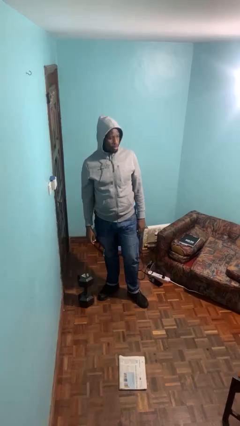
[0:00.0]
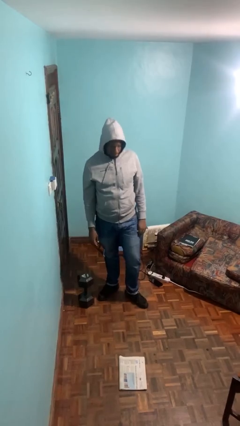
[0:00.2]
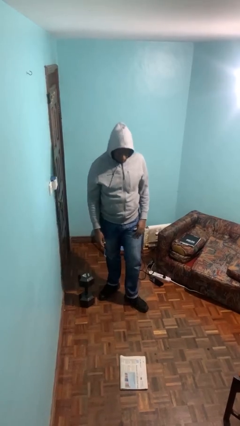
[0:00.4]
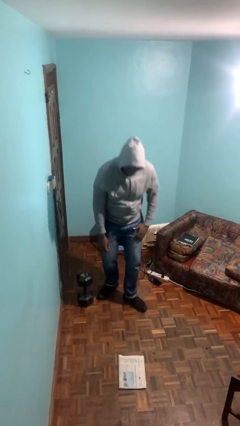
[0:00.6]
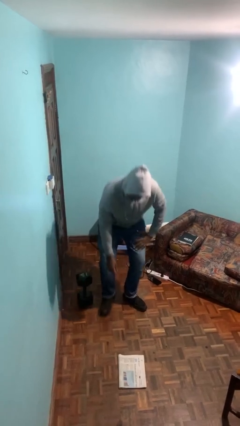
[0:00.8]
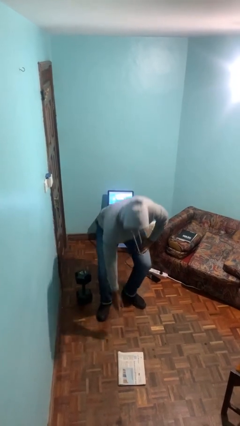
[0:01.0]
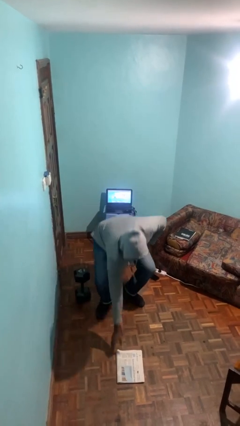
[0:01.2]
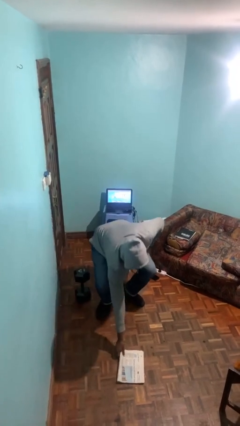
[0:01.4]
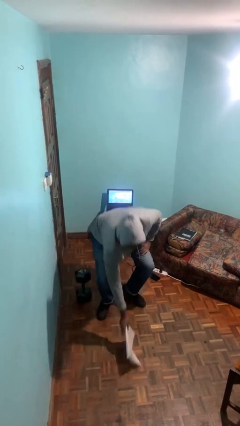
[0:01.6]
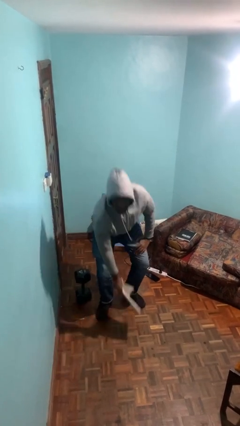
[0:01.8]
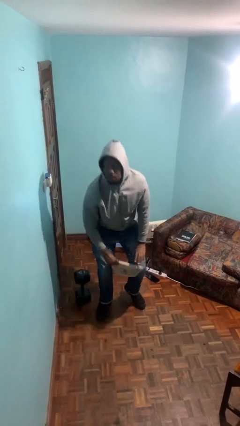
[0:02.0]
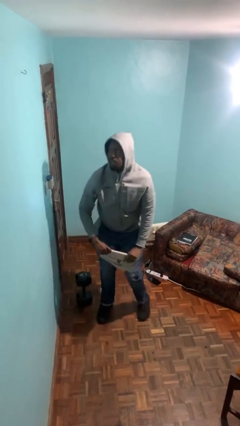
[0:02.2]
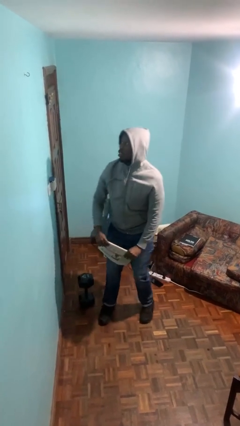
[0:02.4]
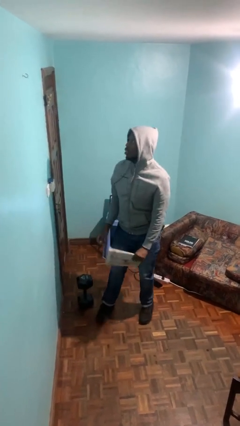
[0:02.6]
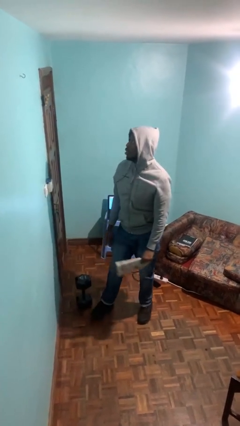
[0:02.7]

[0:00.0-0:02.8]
person picks up object from floor

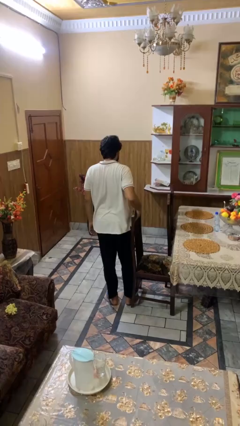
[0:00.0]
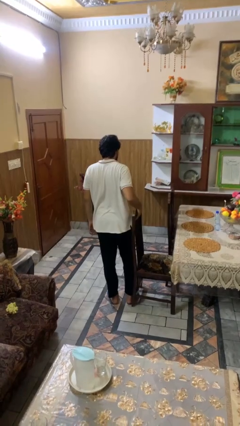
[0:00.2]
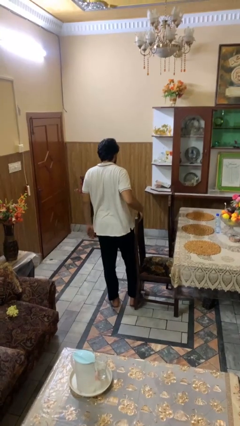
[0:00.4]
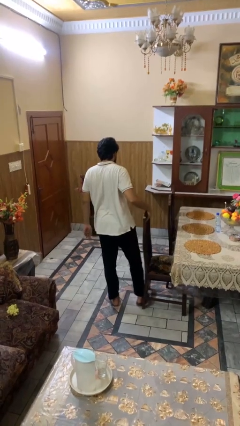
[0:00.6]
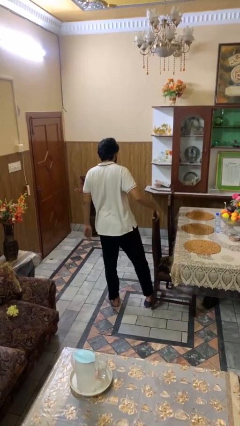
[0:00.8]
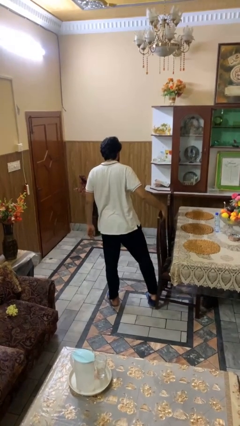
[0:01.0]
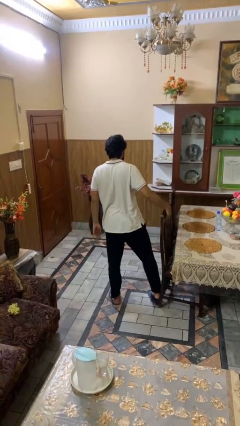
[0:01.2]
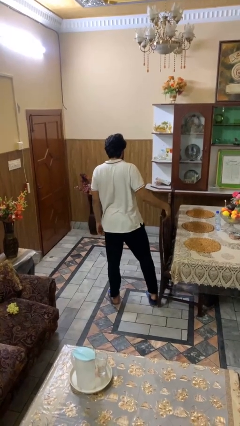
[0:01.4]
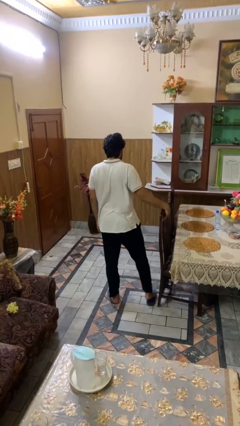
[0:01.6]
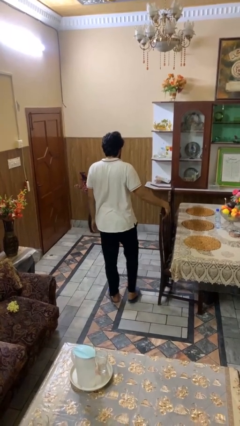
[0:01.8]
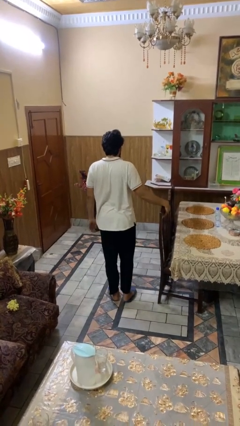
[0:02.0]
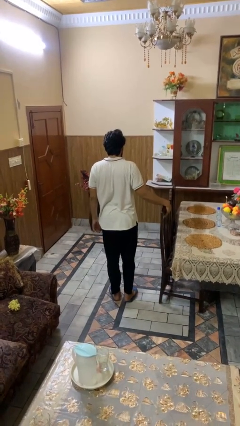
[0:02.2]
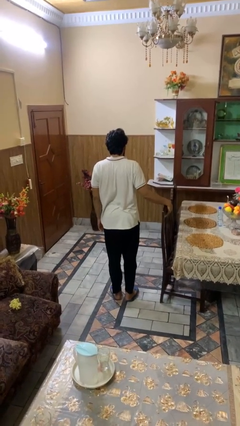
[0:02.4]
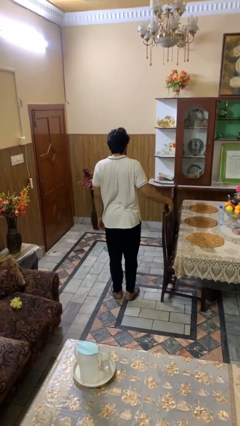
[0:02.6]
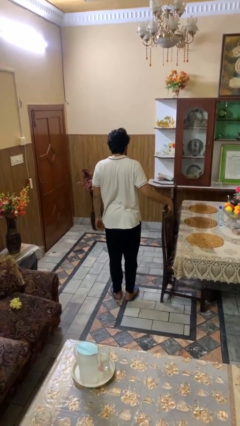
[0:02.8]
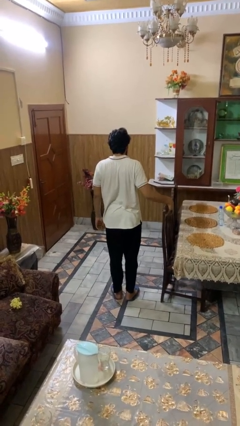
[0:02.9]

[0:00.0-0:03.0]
person pushes in chair

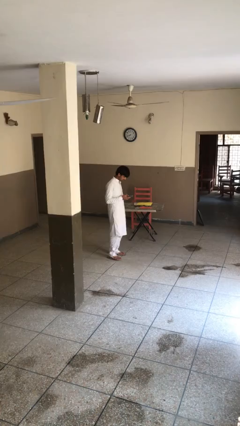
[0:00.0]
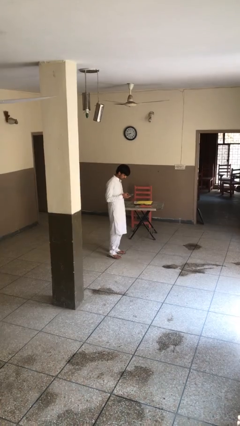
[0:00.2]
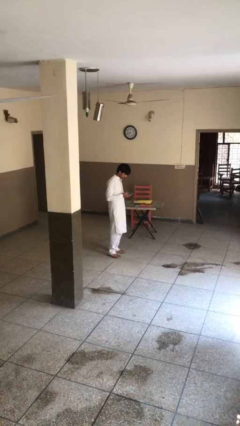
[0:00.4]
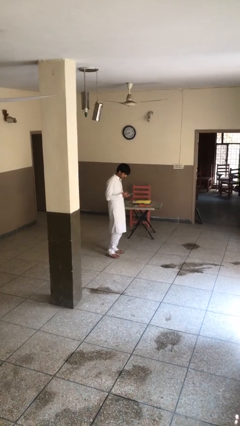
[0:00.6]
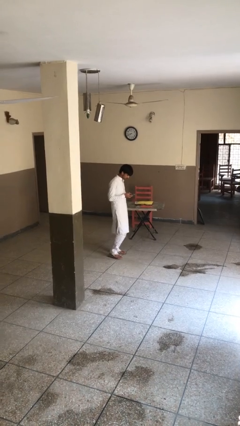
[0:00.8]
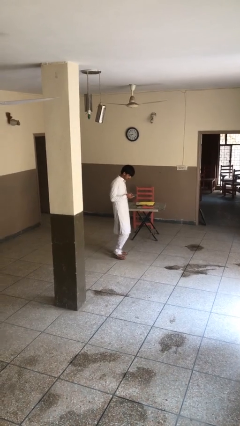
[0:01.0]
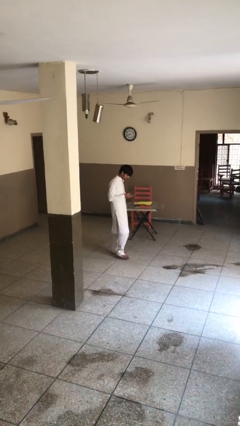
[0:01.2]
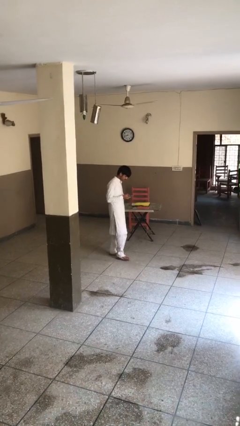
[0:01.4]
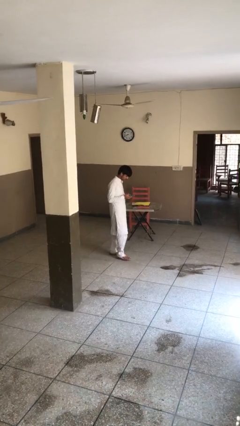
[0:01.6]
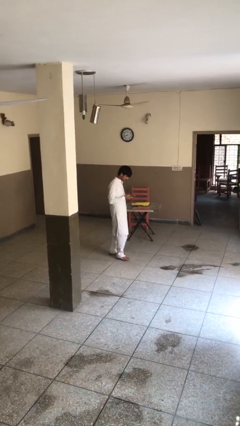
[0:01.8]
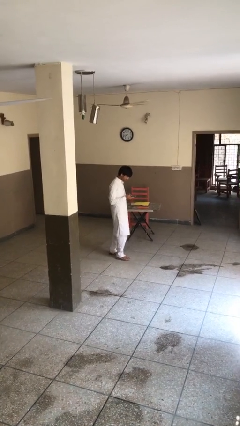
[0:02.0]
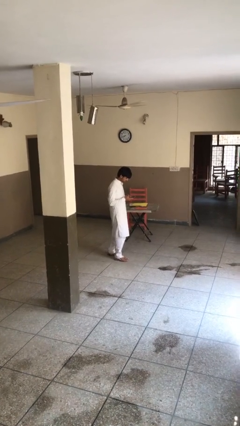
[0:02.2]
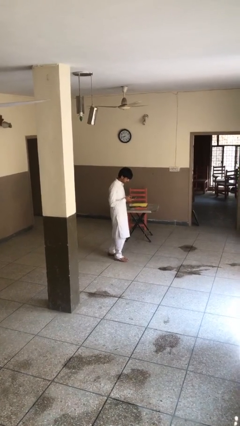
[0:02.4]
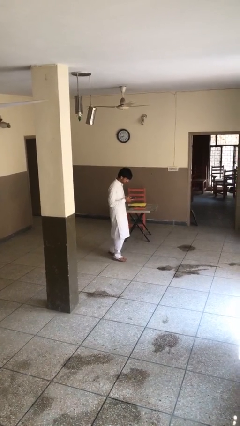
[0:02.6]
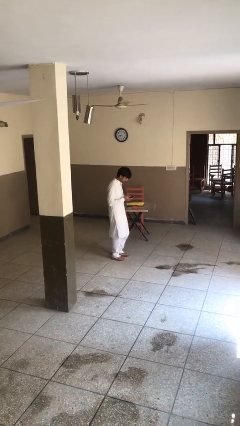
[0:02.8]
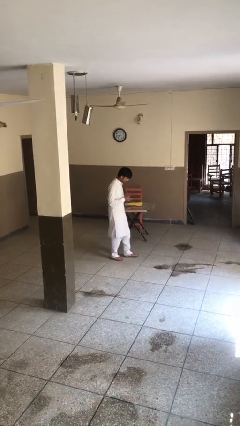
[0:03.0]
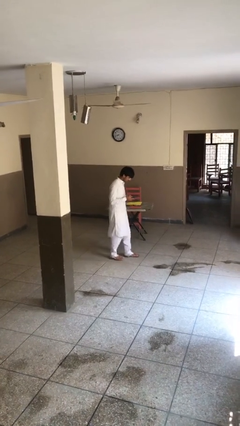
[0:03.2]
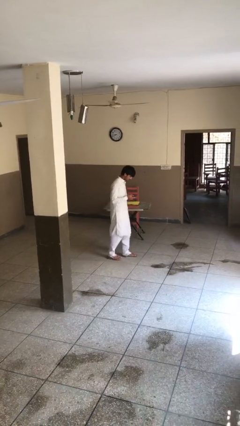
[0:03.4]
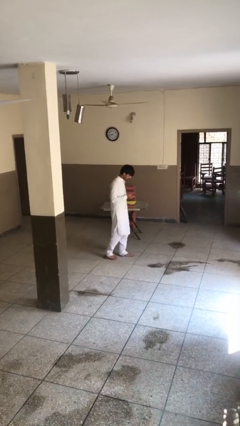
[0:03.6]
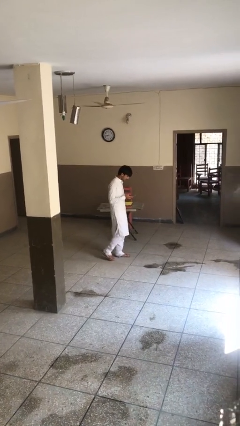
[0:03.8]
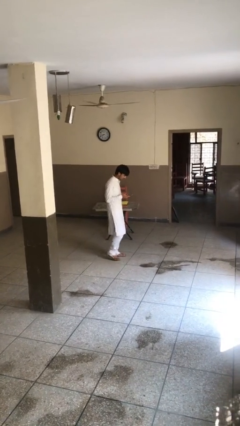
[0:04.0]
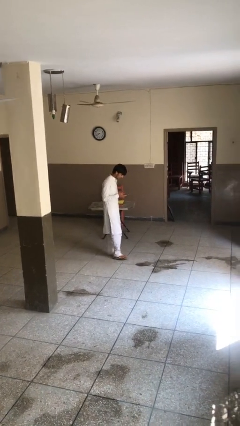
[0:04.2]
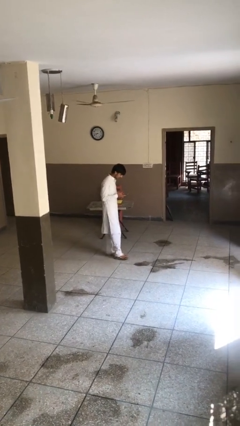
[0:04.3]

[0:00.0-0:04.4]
person texts on phone

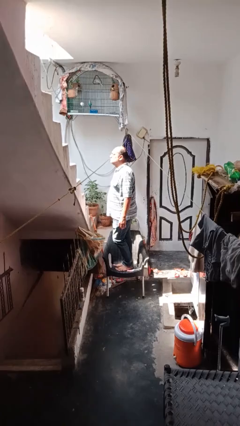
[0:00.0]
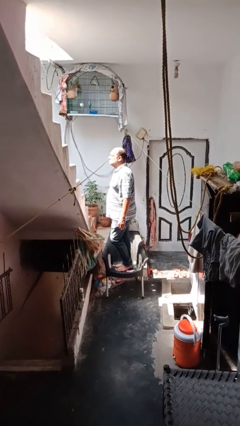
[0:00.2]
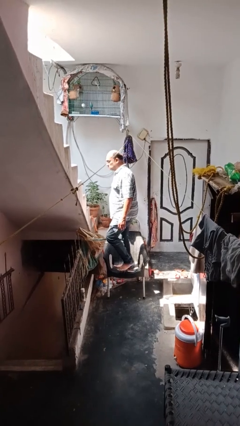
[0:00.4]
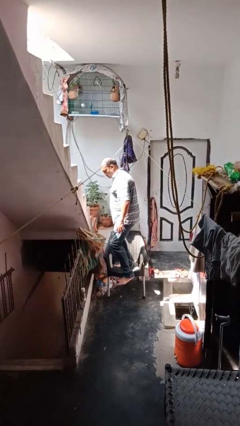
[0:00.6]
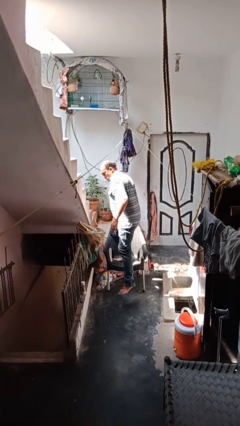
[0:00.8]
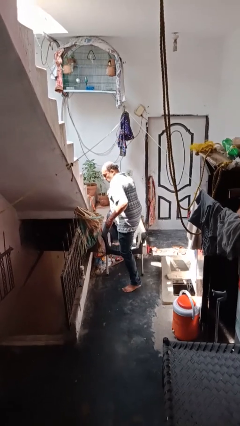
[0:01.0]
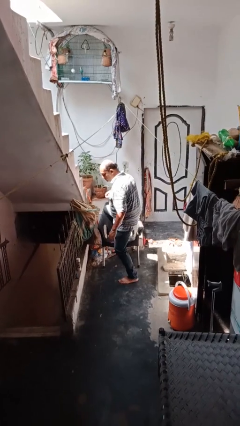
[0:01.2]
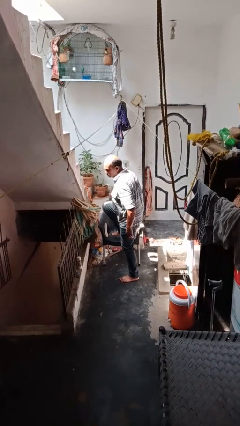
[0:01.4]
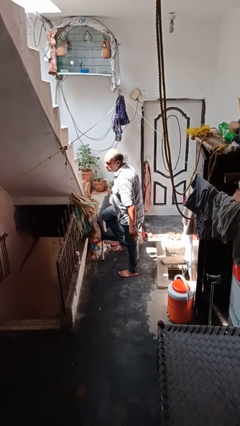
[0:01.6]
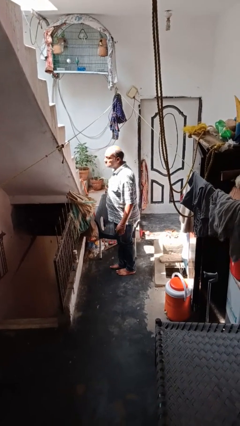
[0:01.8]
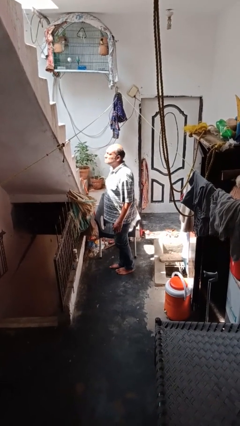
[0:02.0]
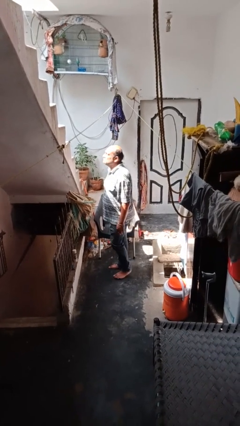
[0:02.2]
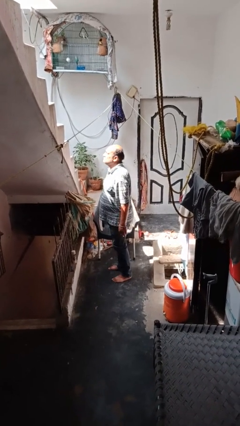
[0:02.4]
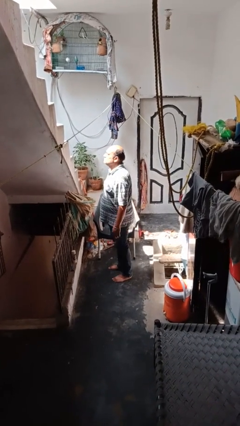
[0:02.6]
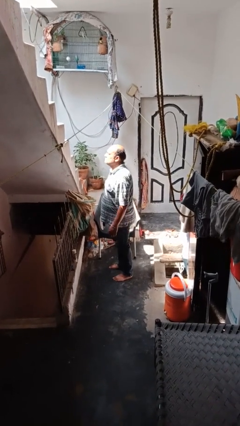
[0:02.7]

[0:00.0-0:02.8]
person climbs off chair

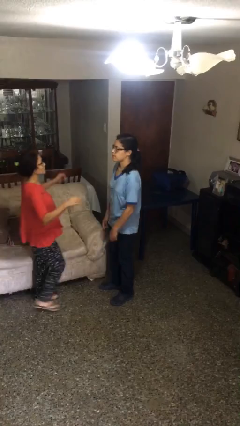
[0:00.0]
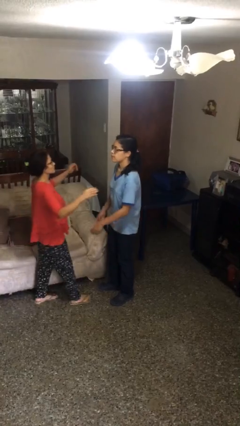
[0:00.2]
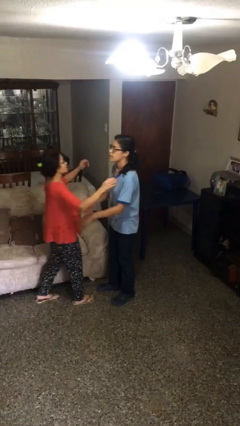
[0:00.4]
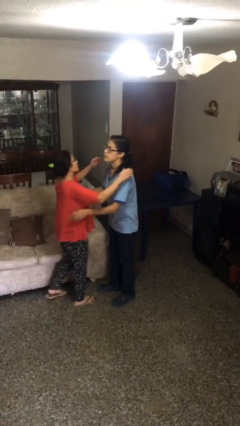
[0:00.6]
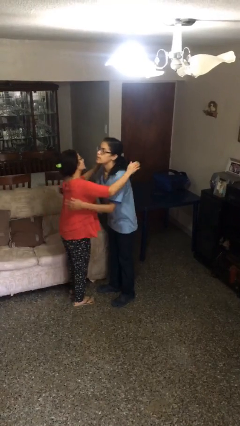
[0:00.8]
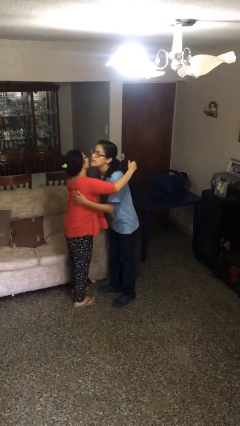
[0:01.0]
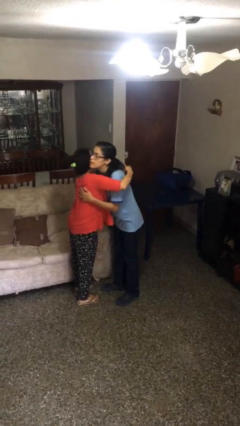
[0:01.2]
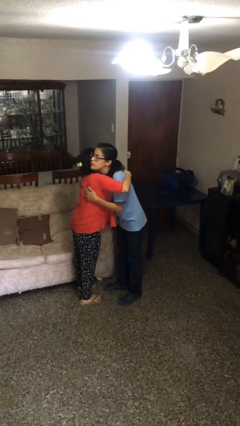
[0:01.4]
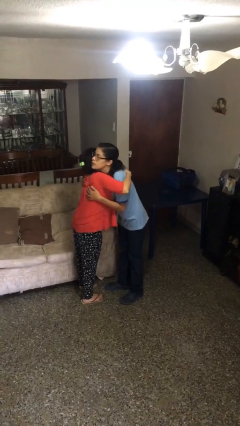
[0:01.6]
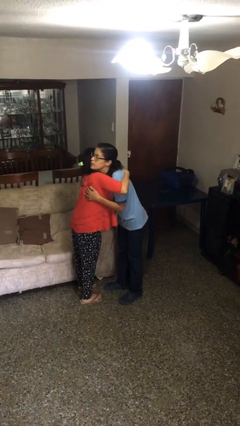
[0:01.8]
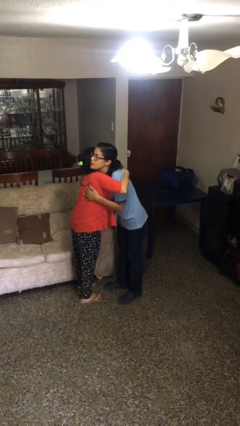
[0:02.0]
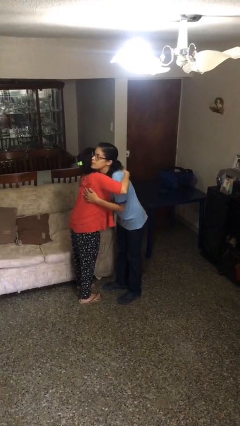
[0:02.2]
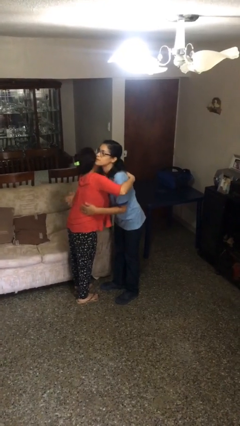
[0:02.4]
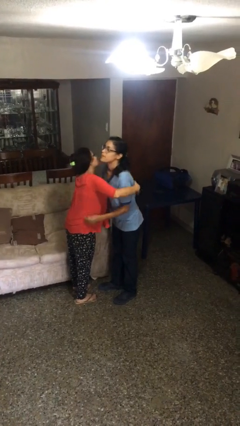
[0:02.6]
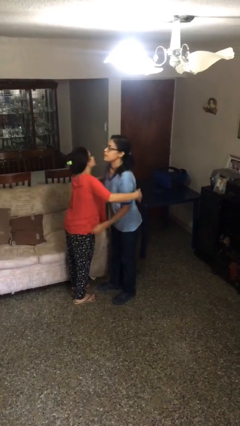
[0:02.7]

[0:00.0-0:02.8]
person embraces person

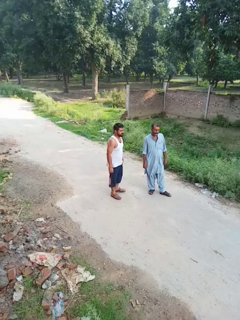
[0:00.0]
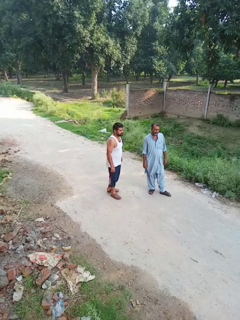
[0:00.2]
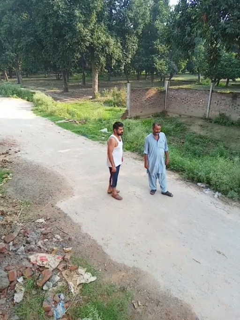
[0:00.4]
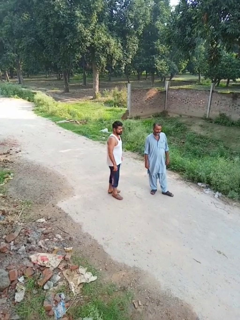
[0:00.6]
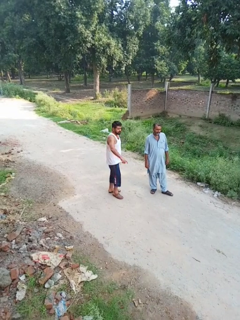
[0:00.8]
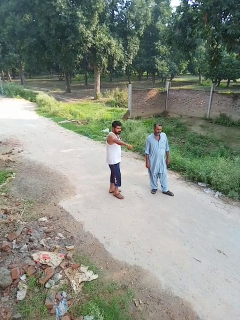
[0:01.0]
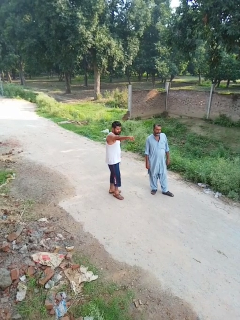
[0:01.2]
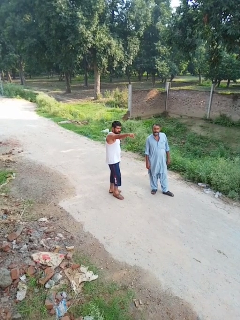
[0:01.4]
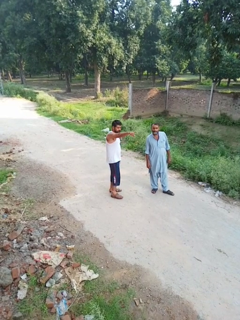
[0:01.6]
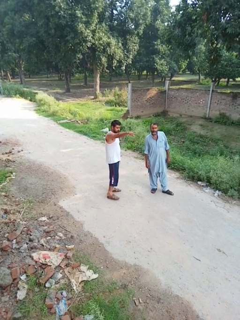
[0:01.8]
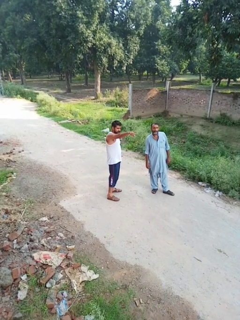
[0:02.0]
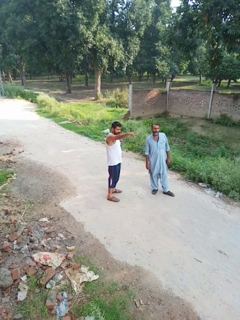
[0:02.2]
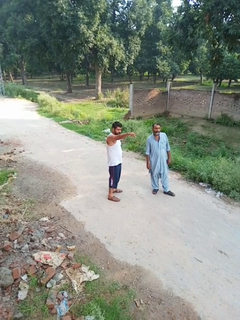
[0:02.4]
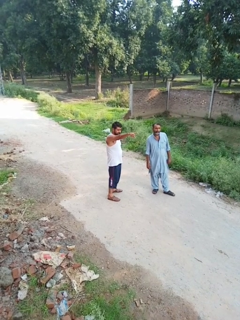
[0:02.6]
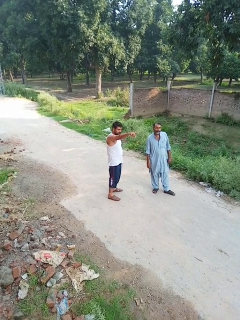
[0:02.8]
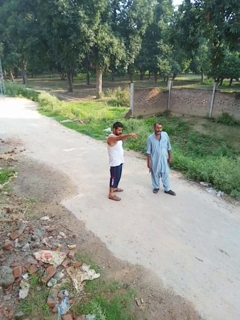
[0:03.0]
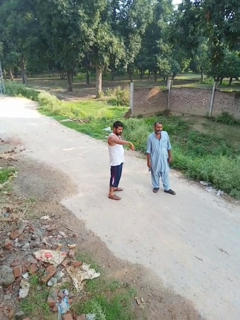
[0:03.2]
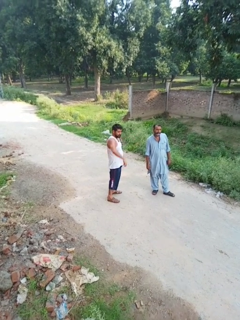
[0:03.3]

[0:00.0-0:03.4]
person points at person
